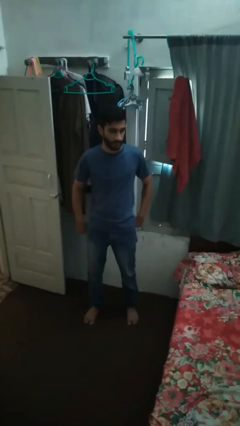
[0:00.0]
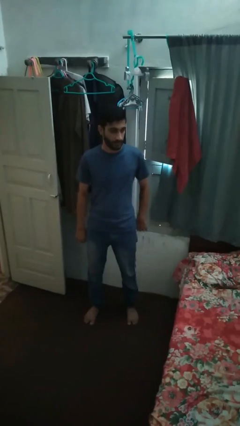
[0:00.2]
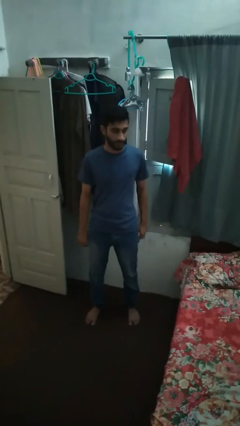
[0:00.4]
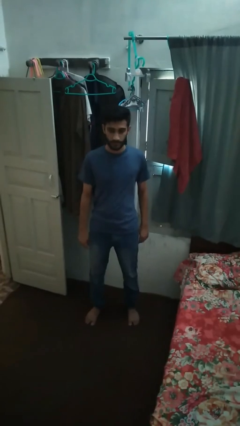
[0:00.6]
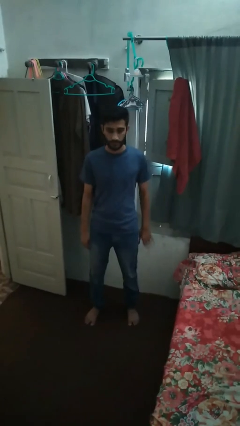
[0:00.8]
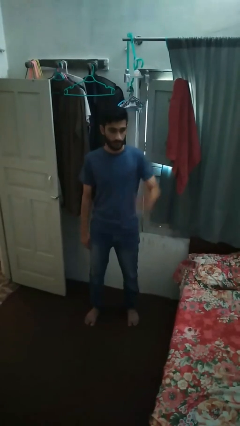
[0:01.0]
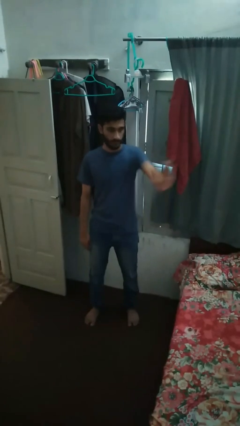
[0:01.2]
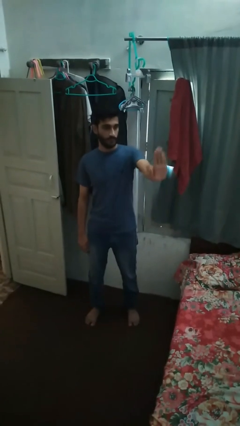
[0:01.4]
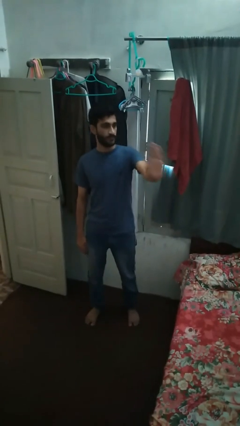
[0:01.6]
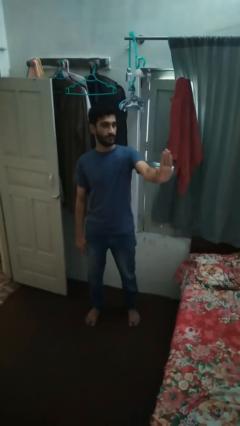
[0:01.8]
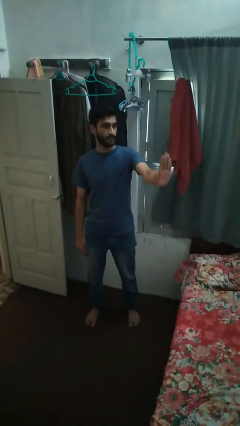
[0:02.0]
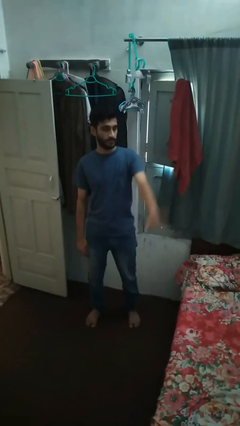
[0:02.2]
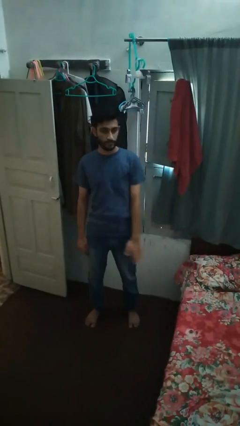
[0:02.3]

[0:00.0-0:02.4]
person gestures stop

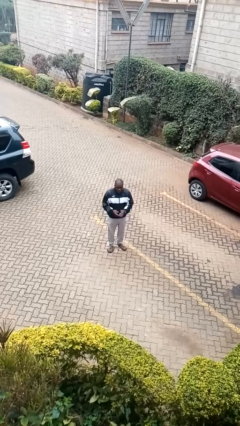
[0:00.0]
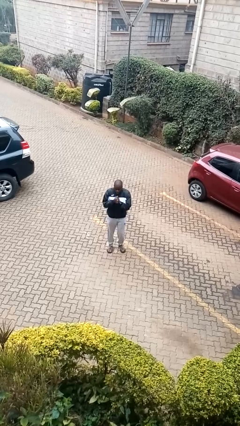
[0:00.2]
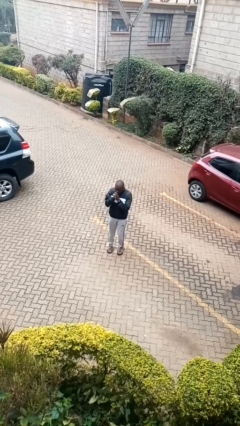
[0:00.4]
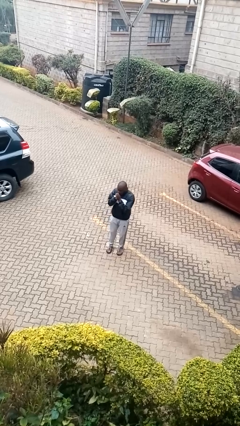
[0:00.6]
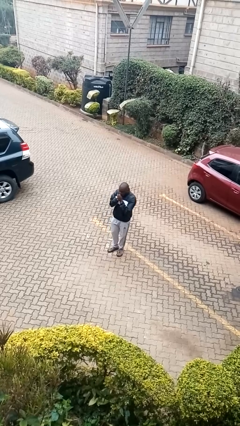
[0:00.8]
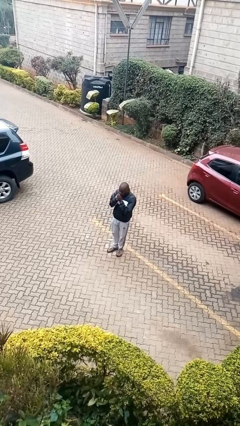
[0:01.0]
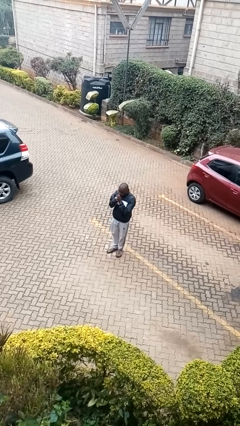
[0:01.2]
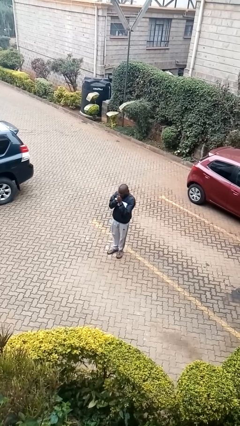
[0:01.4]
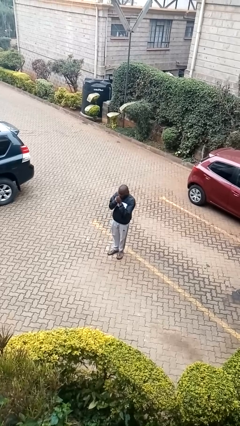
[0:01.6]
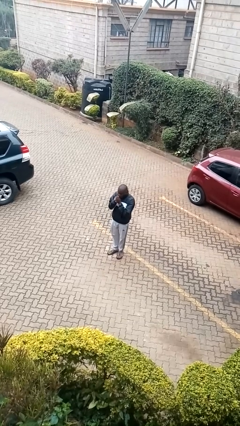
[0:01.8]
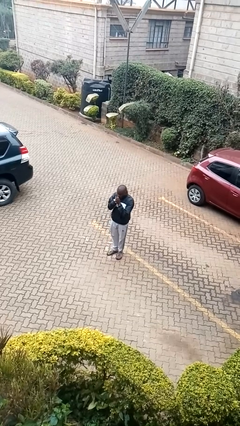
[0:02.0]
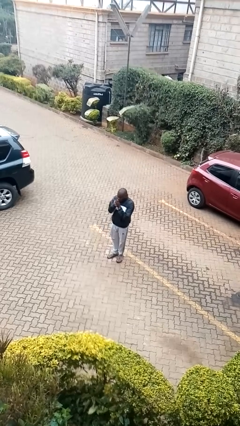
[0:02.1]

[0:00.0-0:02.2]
person blows into hands

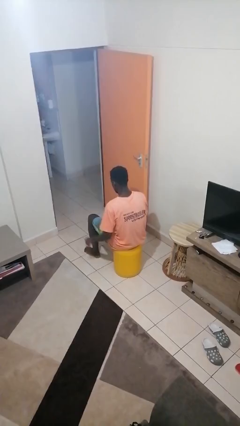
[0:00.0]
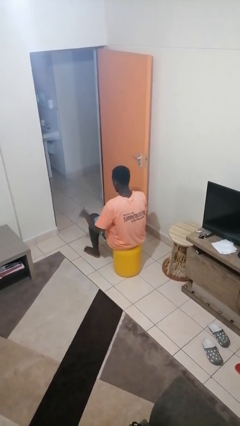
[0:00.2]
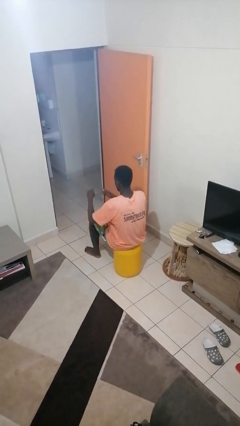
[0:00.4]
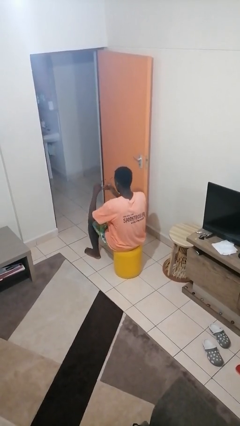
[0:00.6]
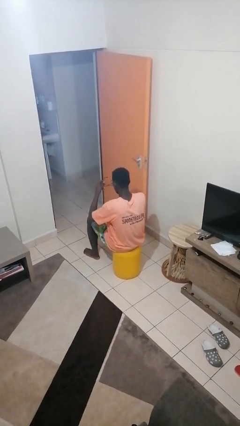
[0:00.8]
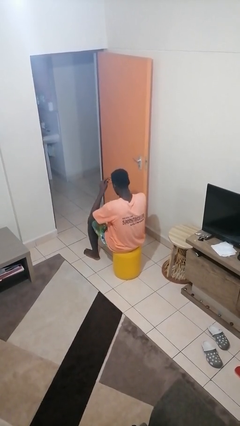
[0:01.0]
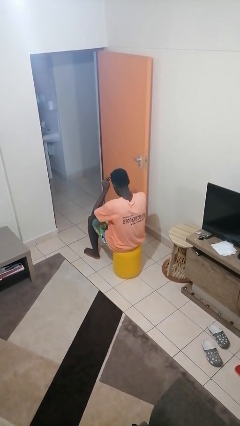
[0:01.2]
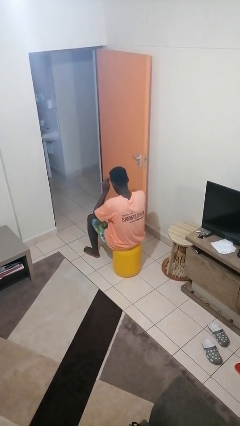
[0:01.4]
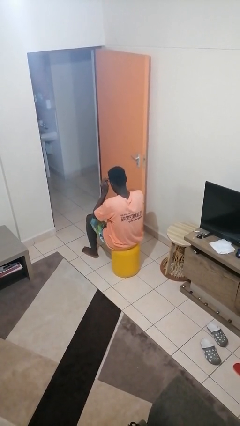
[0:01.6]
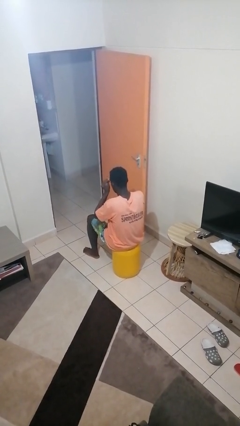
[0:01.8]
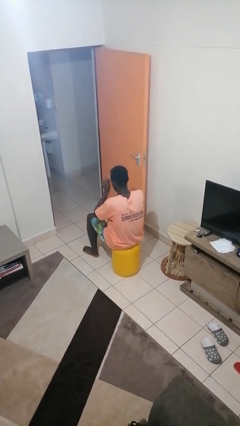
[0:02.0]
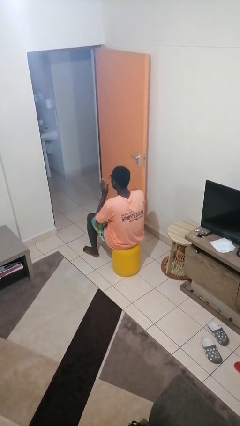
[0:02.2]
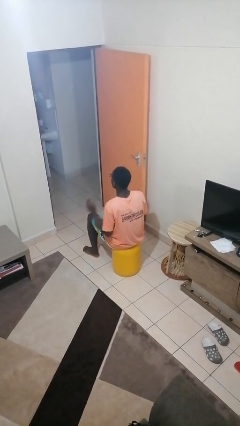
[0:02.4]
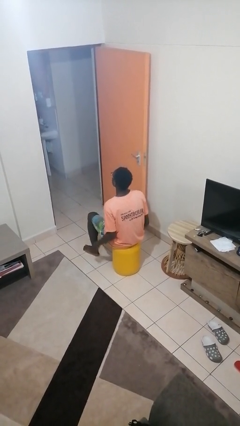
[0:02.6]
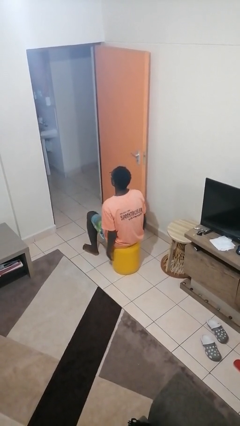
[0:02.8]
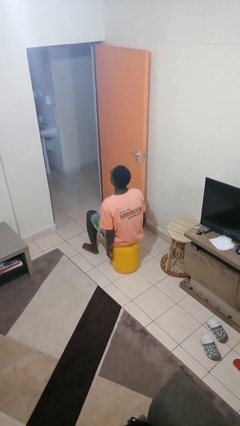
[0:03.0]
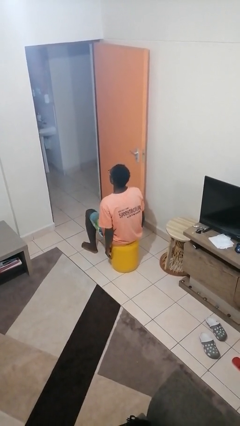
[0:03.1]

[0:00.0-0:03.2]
person puts on glasses

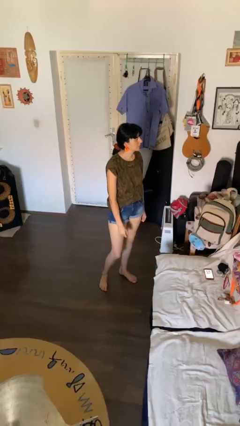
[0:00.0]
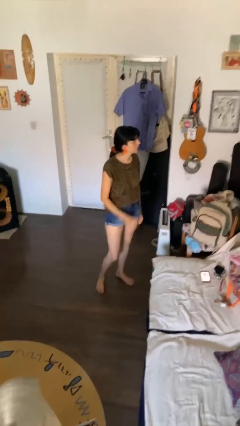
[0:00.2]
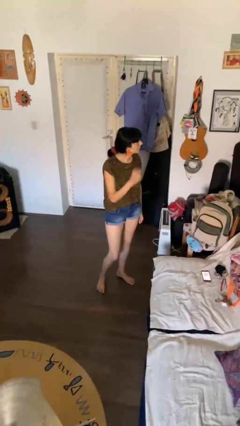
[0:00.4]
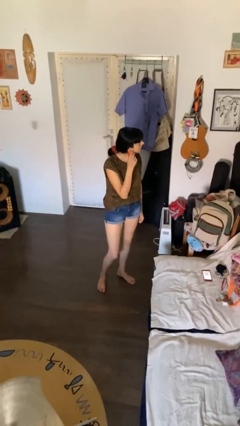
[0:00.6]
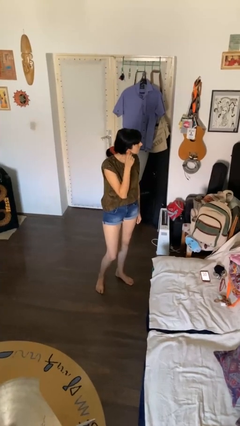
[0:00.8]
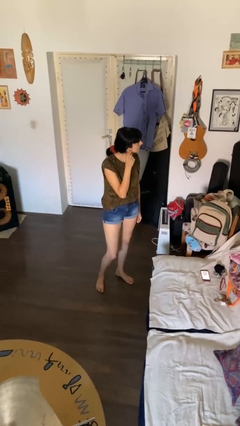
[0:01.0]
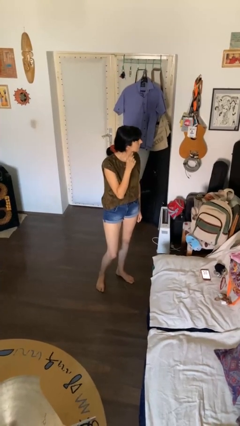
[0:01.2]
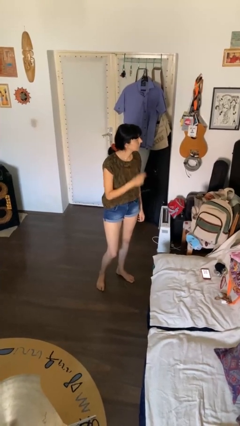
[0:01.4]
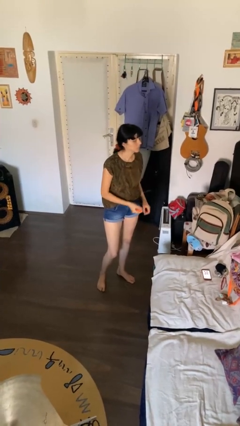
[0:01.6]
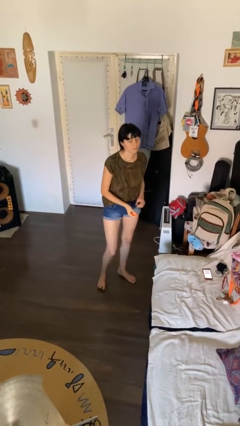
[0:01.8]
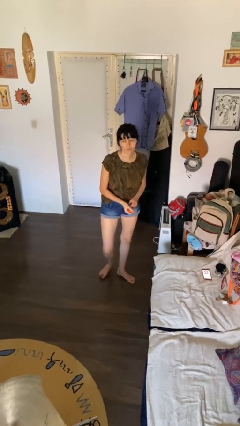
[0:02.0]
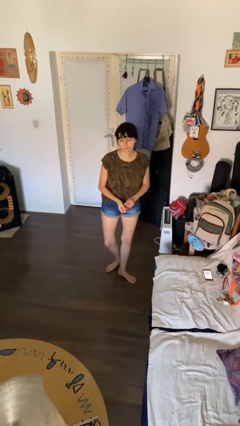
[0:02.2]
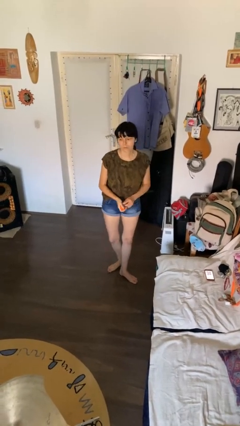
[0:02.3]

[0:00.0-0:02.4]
person takes off earrings

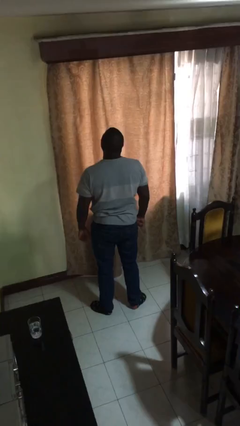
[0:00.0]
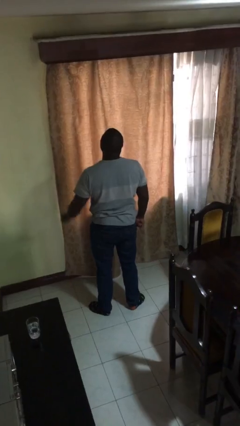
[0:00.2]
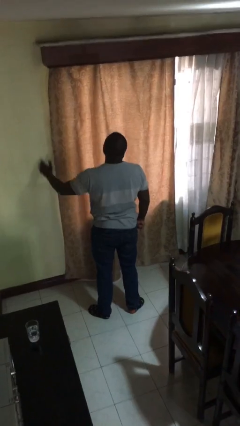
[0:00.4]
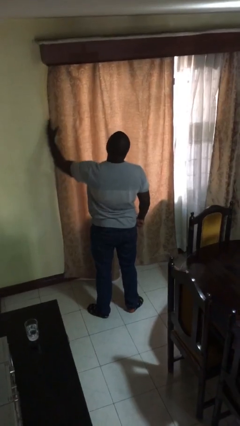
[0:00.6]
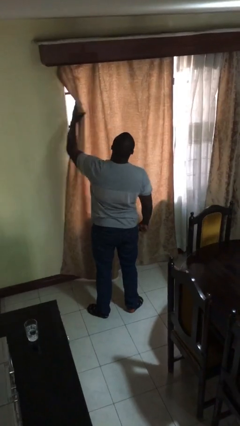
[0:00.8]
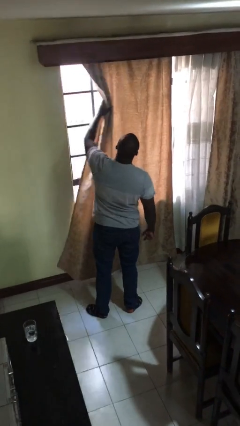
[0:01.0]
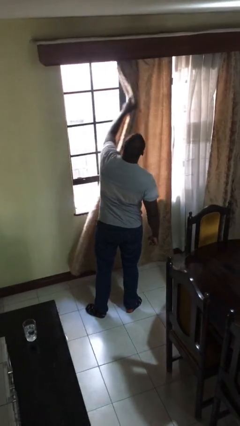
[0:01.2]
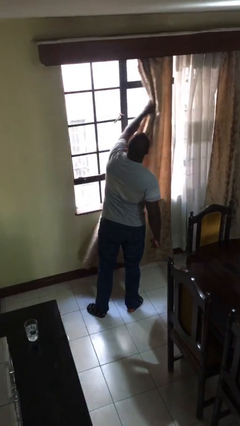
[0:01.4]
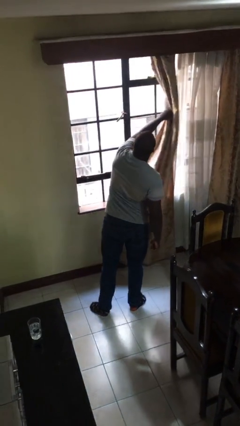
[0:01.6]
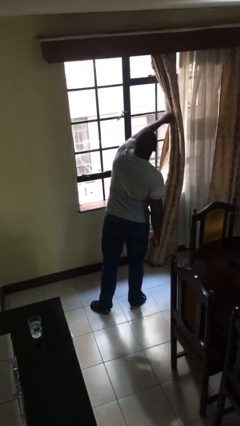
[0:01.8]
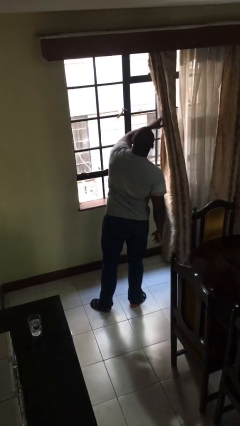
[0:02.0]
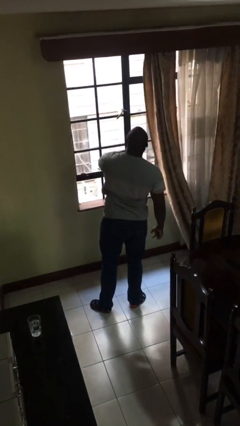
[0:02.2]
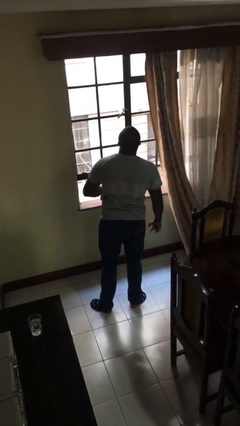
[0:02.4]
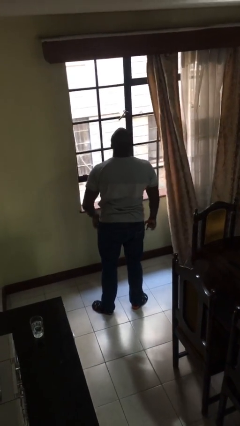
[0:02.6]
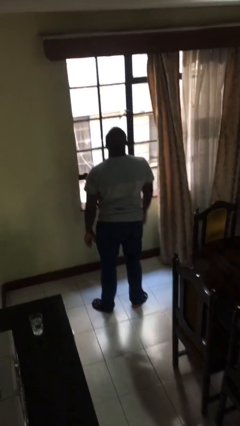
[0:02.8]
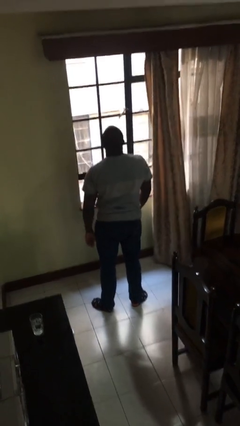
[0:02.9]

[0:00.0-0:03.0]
person opens curtains

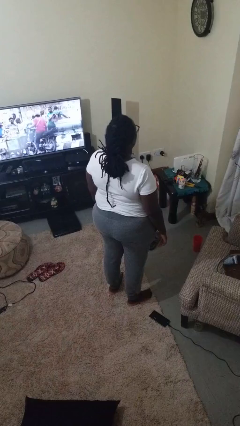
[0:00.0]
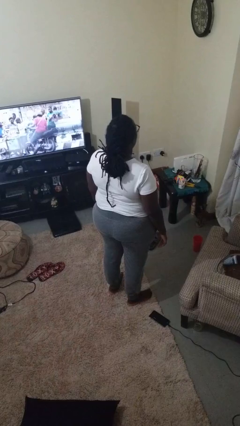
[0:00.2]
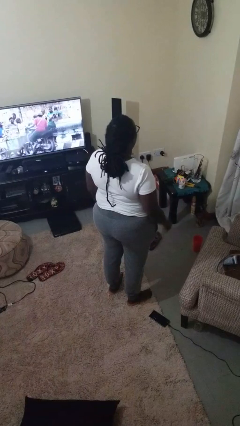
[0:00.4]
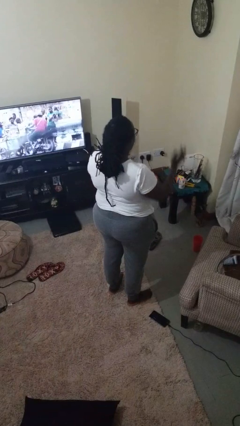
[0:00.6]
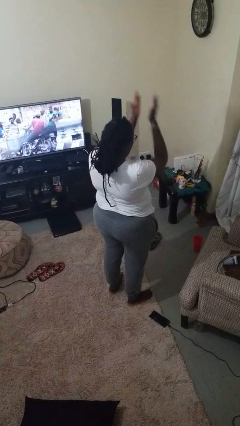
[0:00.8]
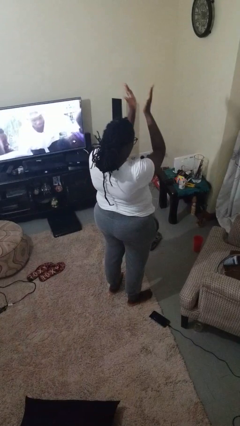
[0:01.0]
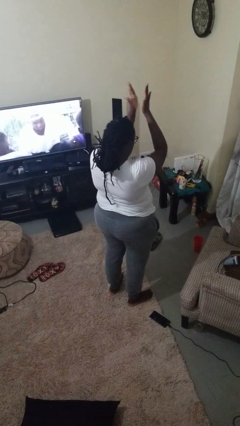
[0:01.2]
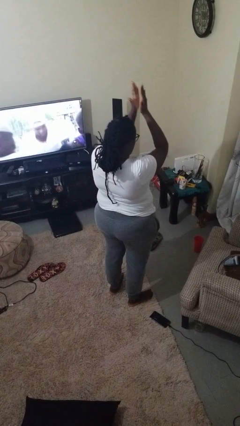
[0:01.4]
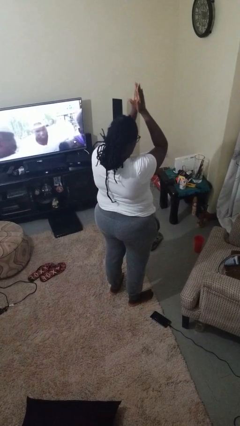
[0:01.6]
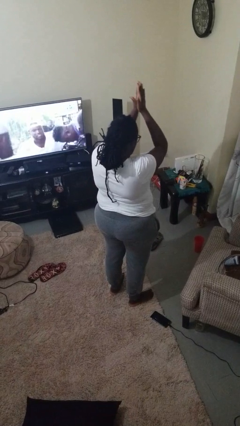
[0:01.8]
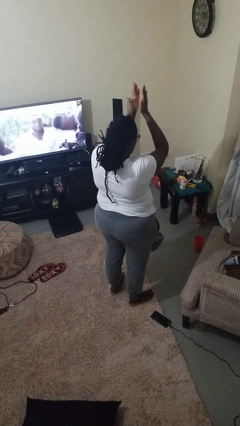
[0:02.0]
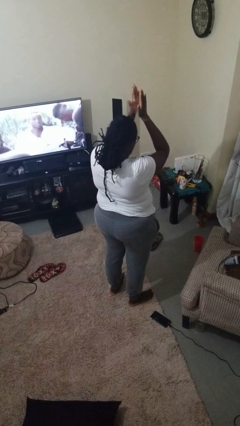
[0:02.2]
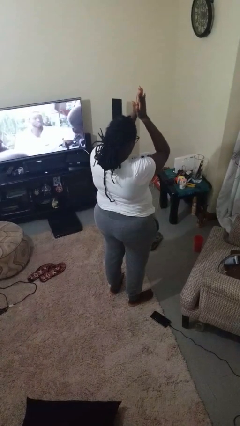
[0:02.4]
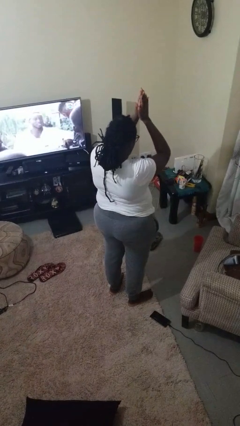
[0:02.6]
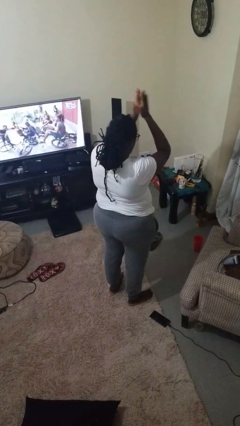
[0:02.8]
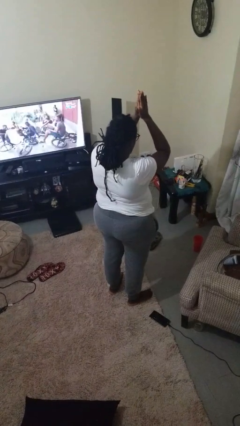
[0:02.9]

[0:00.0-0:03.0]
person claps hands

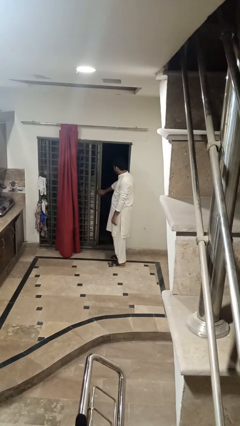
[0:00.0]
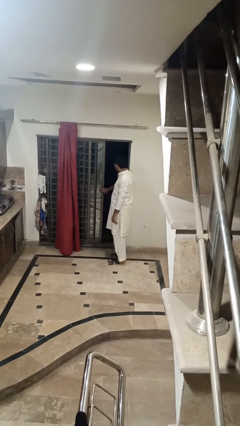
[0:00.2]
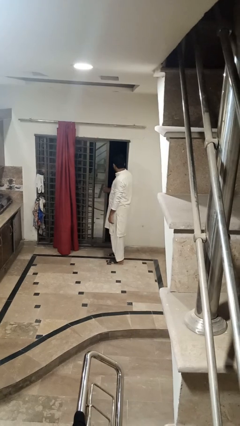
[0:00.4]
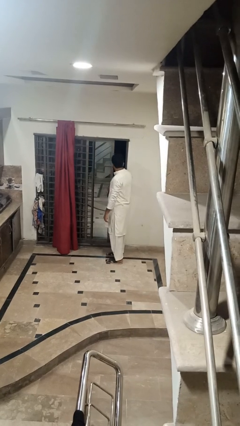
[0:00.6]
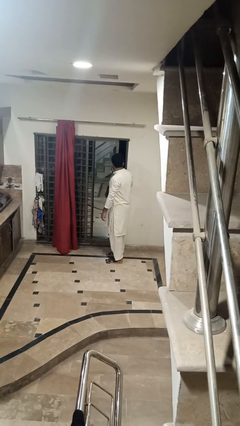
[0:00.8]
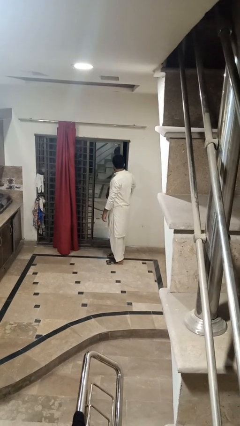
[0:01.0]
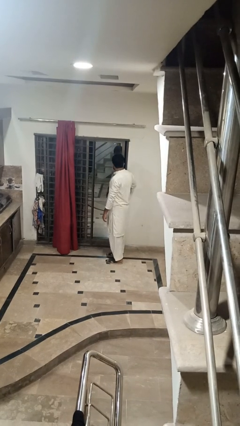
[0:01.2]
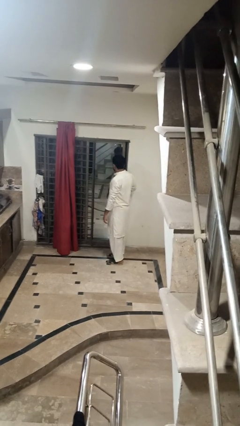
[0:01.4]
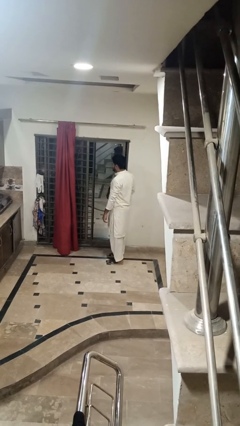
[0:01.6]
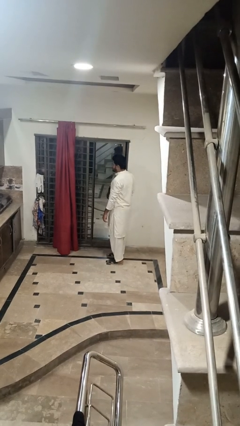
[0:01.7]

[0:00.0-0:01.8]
person closes home window
